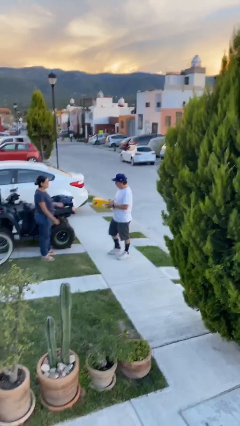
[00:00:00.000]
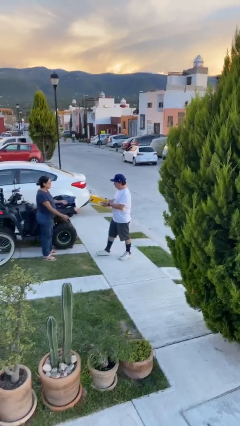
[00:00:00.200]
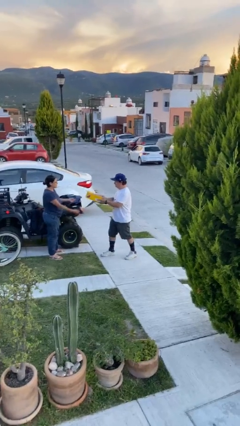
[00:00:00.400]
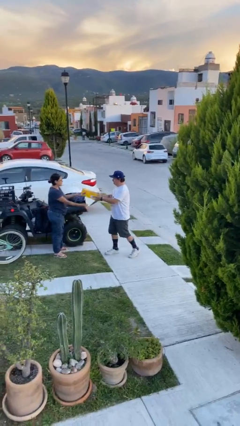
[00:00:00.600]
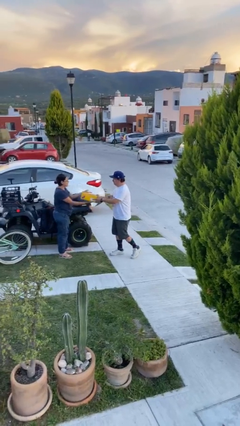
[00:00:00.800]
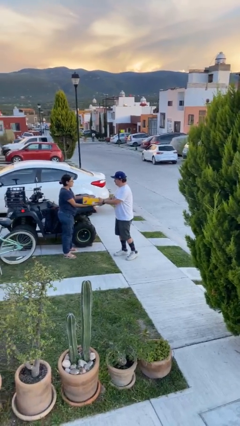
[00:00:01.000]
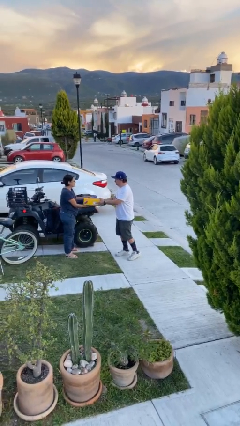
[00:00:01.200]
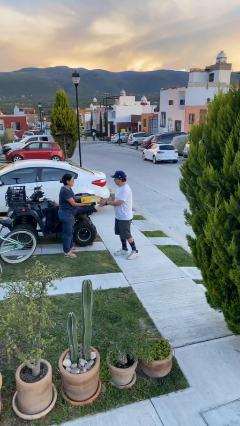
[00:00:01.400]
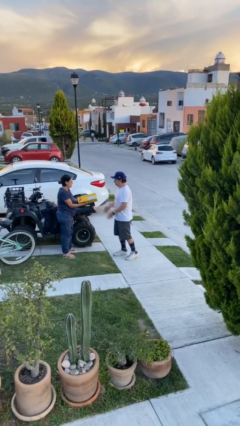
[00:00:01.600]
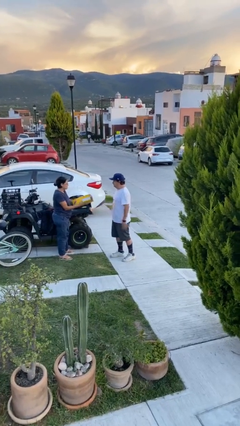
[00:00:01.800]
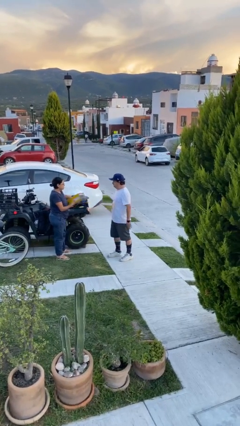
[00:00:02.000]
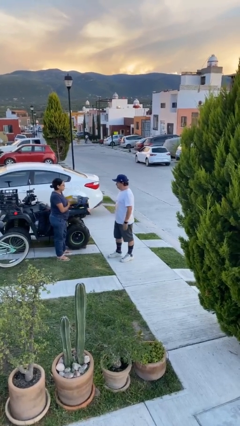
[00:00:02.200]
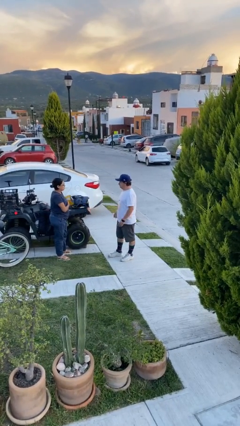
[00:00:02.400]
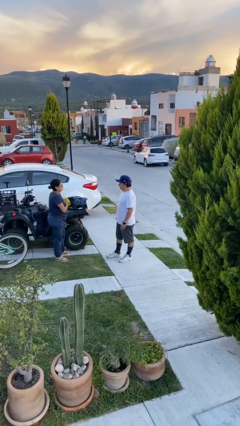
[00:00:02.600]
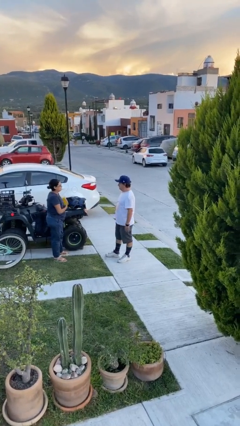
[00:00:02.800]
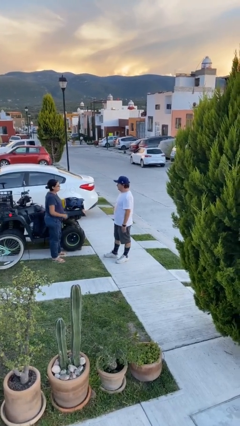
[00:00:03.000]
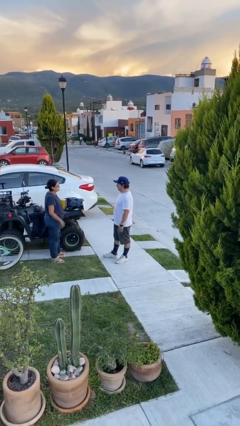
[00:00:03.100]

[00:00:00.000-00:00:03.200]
person transfers object to person

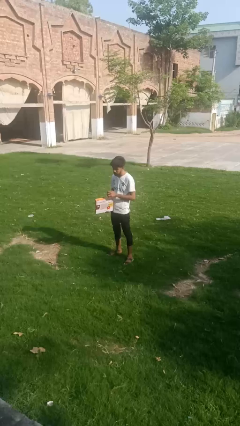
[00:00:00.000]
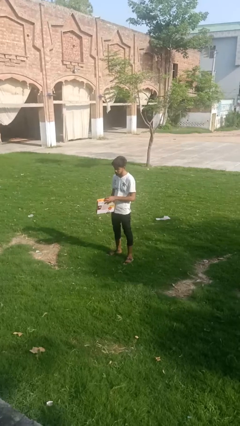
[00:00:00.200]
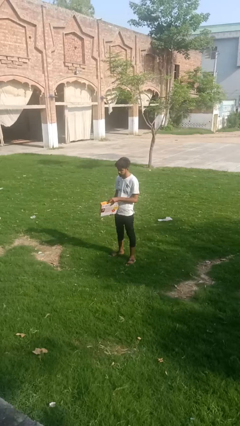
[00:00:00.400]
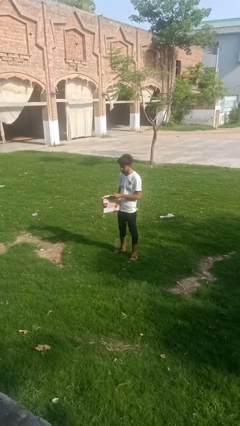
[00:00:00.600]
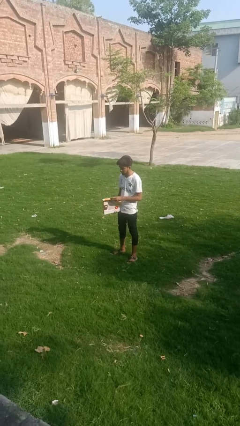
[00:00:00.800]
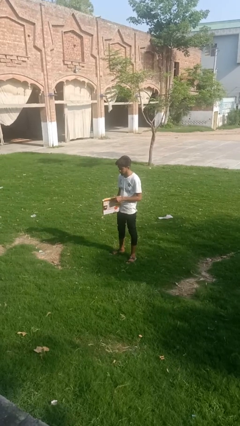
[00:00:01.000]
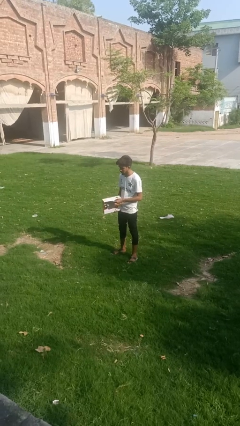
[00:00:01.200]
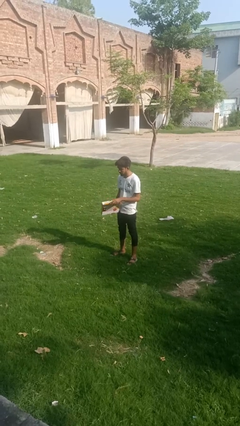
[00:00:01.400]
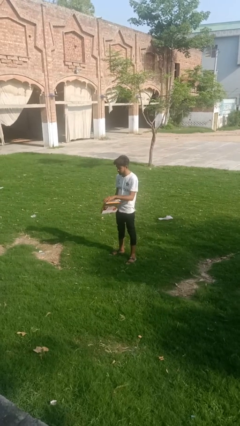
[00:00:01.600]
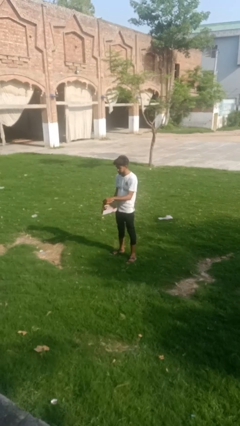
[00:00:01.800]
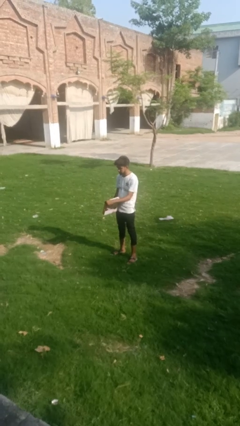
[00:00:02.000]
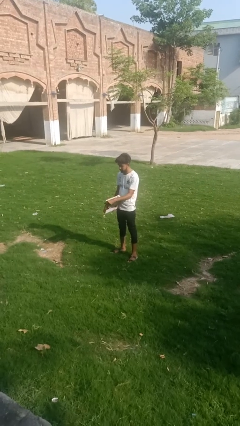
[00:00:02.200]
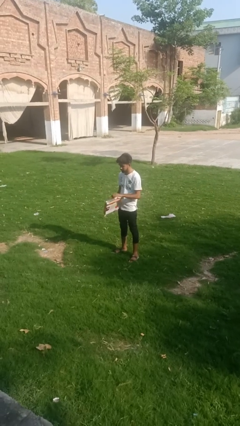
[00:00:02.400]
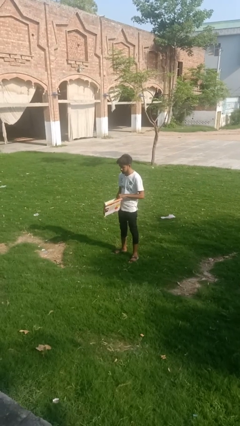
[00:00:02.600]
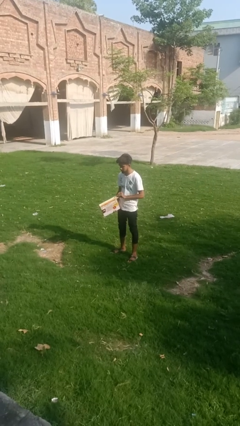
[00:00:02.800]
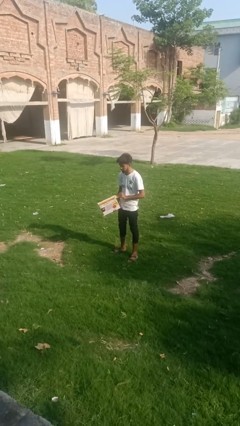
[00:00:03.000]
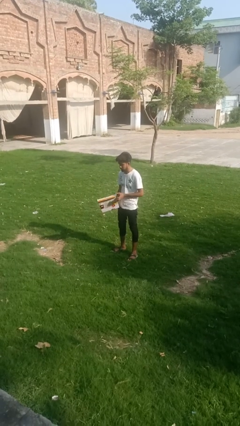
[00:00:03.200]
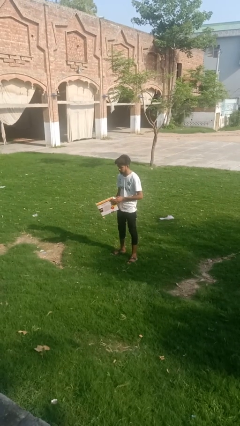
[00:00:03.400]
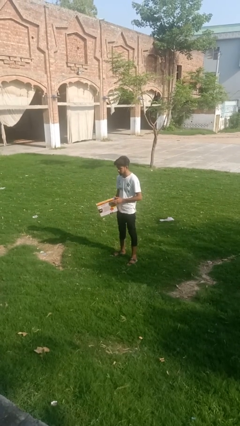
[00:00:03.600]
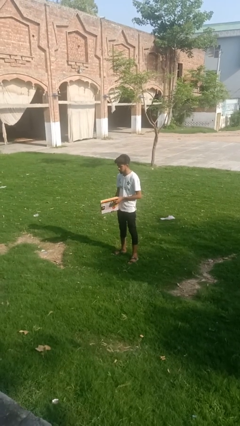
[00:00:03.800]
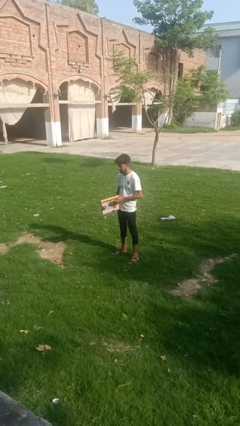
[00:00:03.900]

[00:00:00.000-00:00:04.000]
person opens mailbox

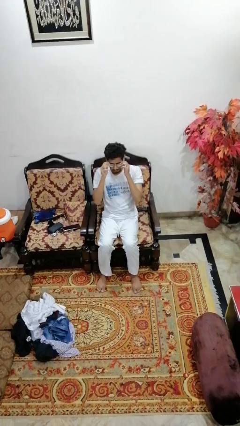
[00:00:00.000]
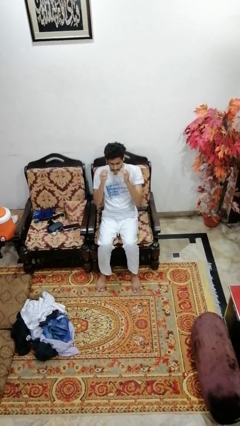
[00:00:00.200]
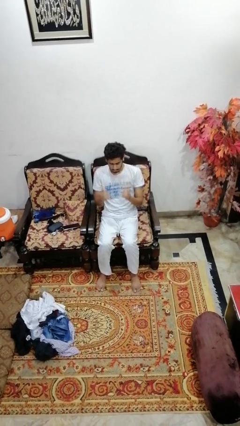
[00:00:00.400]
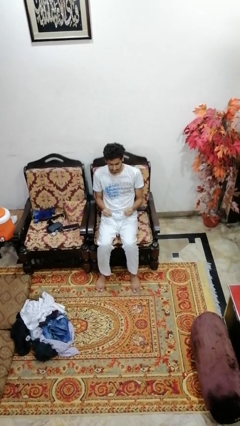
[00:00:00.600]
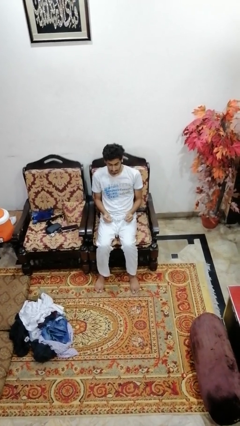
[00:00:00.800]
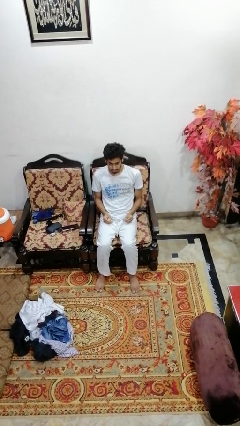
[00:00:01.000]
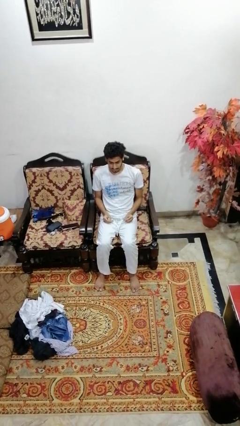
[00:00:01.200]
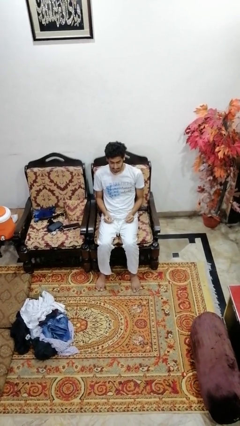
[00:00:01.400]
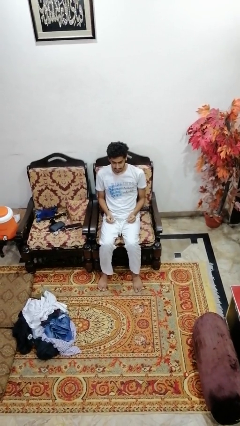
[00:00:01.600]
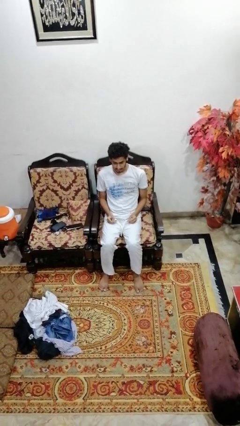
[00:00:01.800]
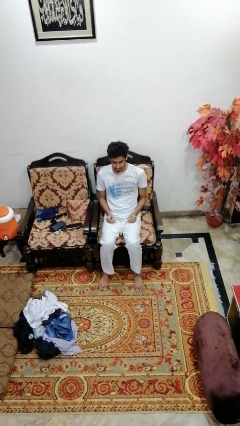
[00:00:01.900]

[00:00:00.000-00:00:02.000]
person takes off glasses

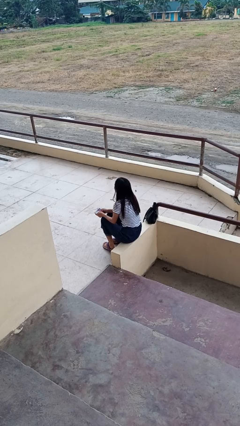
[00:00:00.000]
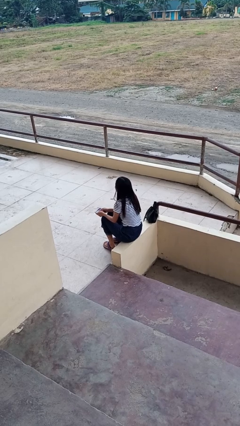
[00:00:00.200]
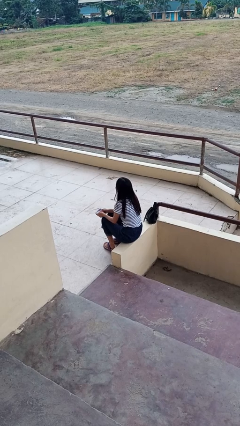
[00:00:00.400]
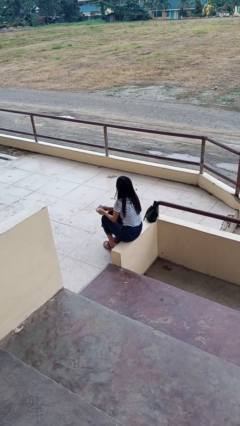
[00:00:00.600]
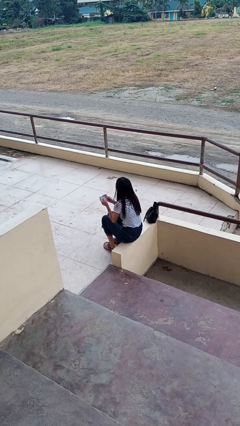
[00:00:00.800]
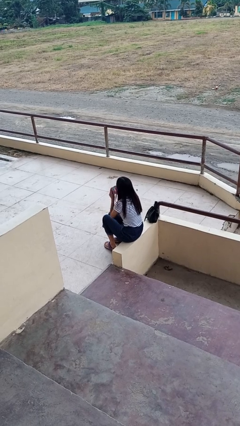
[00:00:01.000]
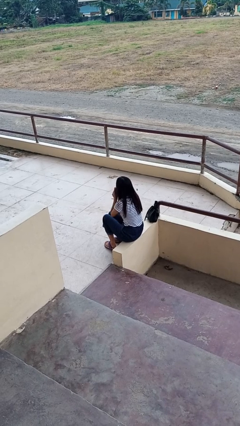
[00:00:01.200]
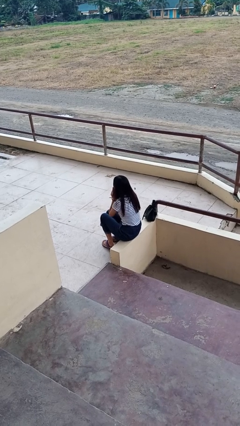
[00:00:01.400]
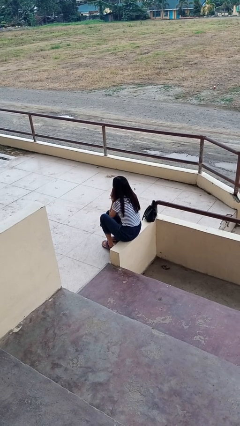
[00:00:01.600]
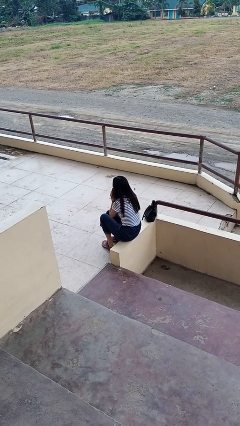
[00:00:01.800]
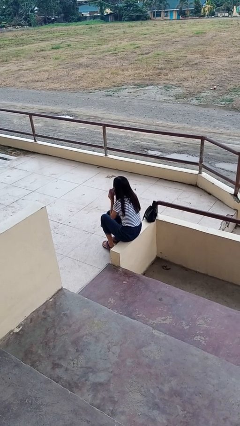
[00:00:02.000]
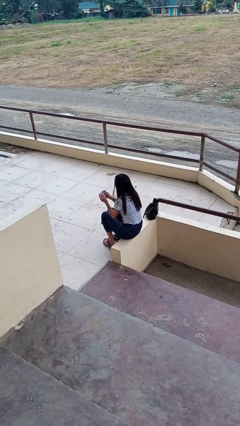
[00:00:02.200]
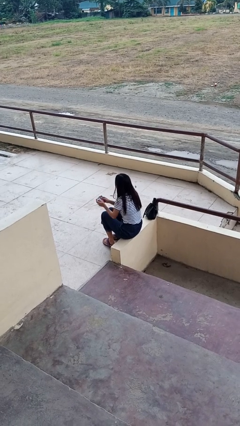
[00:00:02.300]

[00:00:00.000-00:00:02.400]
person blows nose

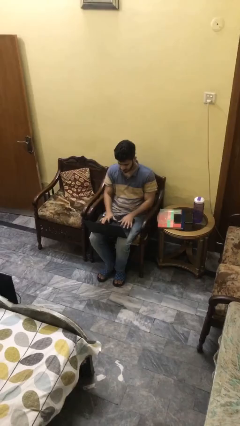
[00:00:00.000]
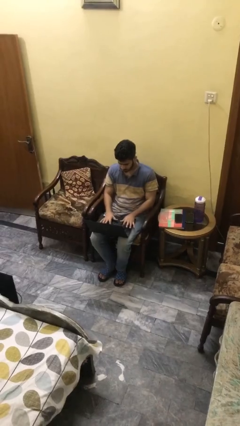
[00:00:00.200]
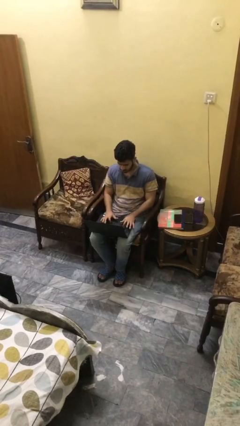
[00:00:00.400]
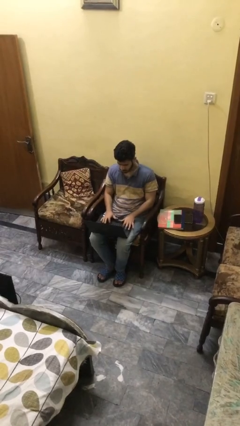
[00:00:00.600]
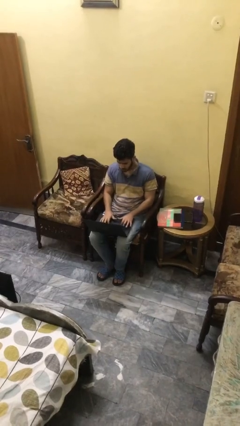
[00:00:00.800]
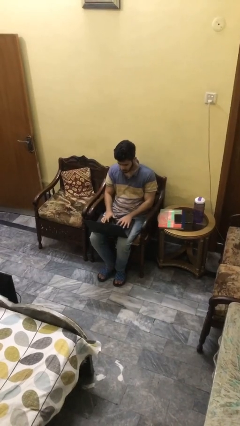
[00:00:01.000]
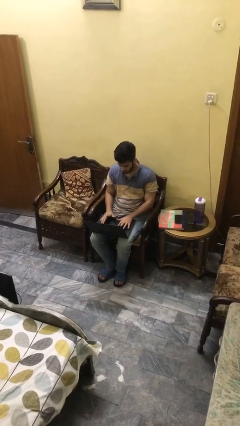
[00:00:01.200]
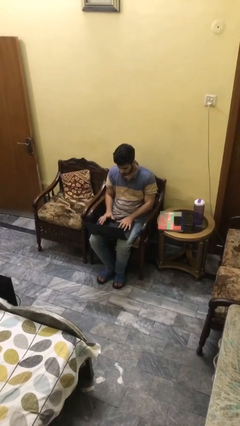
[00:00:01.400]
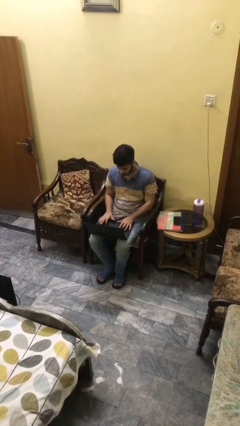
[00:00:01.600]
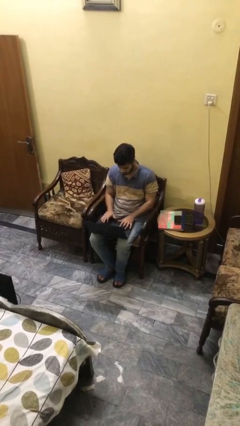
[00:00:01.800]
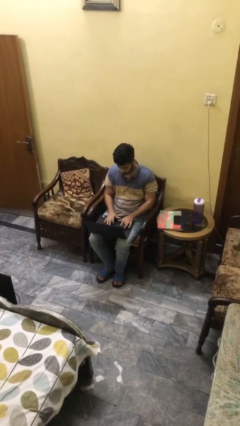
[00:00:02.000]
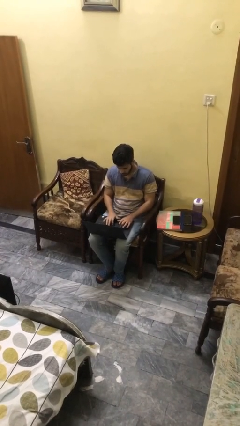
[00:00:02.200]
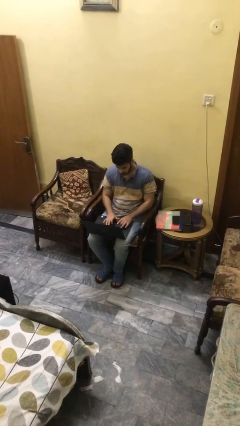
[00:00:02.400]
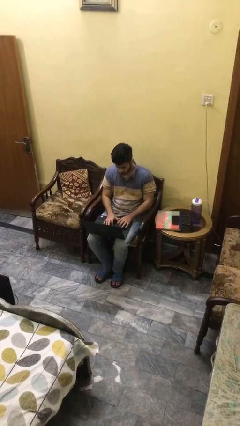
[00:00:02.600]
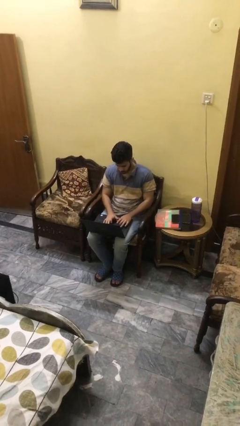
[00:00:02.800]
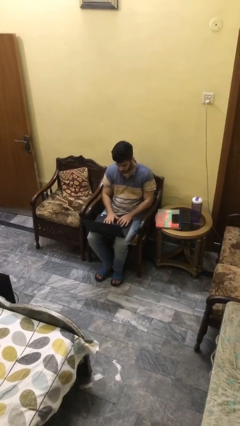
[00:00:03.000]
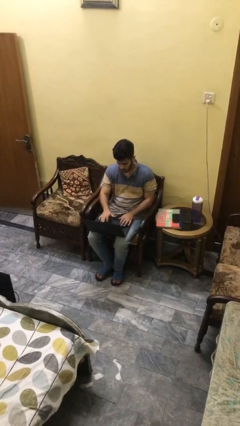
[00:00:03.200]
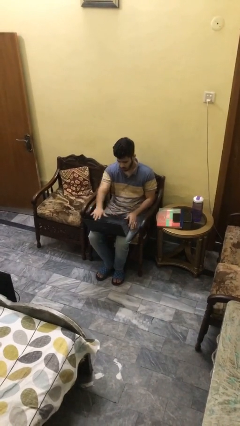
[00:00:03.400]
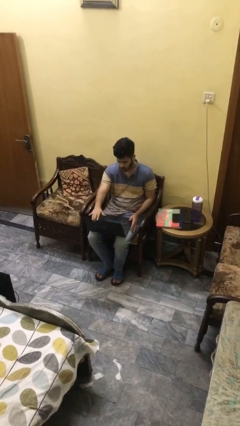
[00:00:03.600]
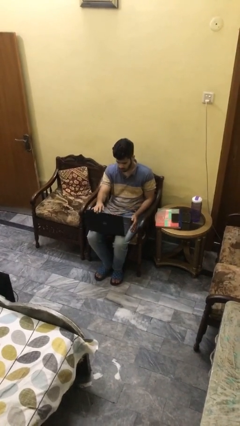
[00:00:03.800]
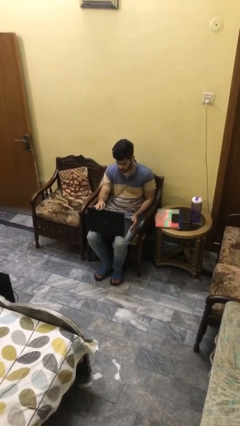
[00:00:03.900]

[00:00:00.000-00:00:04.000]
person interacts with laptop

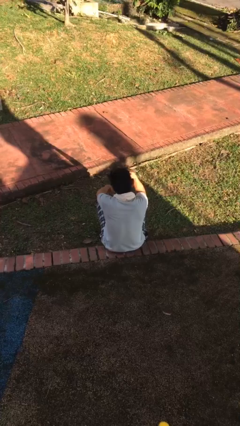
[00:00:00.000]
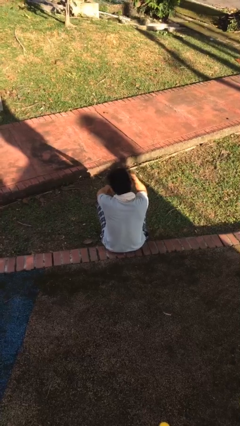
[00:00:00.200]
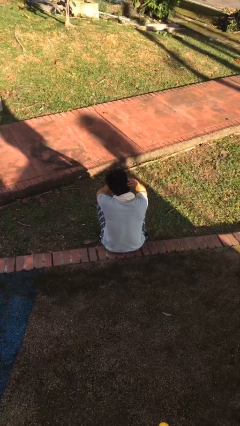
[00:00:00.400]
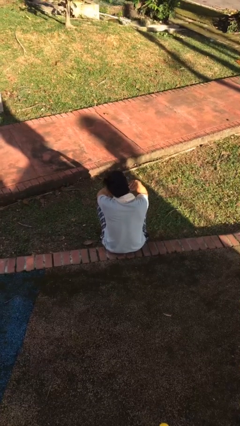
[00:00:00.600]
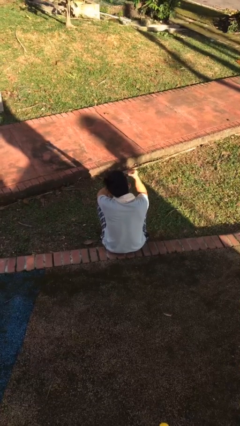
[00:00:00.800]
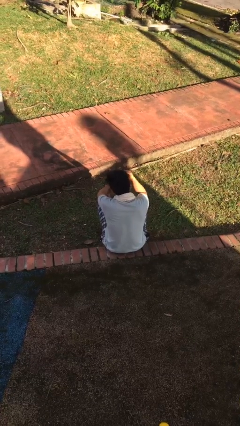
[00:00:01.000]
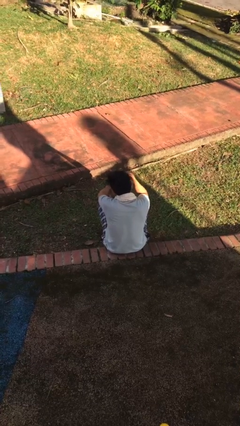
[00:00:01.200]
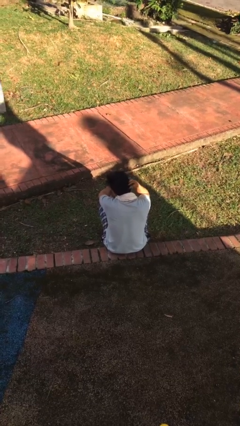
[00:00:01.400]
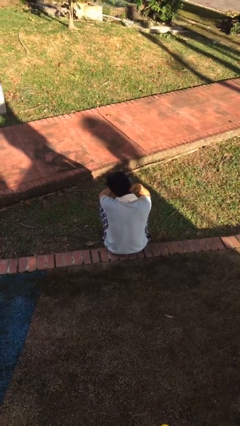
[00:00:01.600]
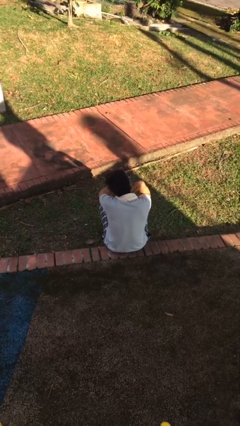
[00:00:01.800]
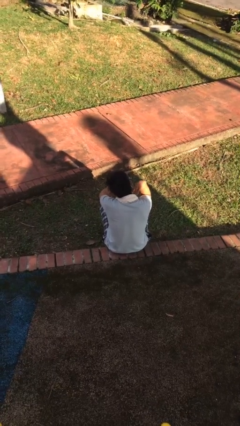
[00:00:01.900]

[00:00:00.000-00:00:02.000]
person strokes hair
